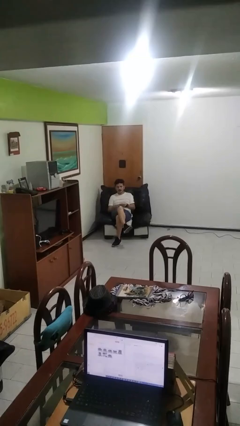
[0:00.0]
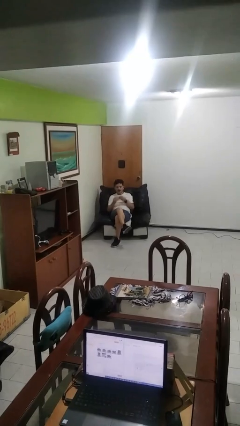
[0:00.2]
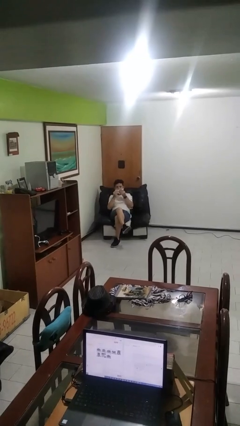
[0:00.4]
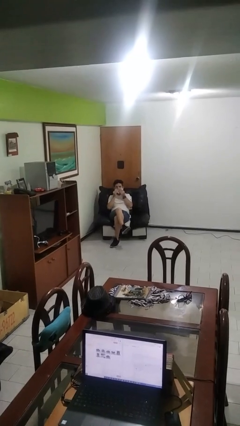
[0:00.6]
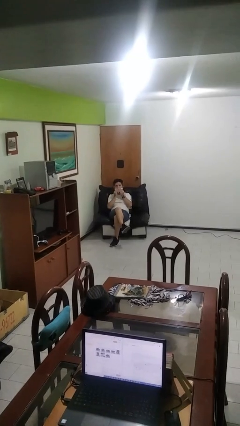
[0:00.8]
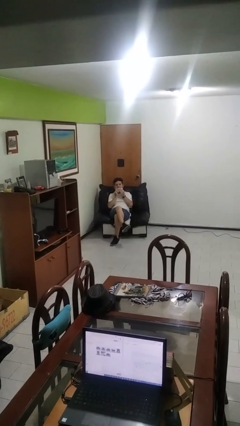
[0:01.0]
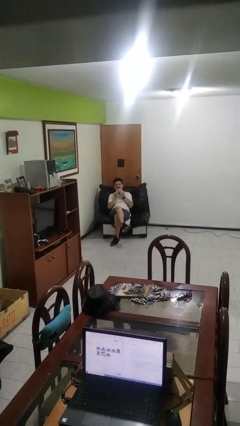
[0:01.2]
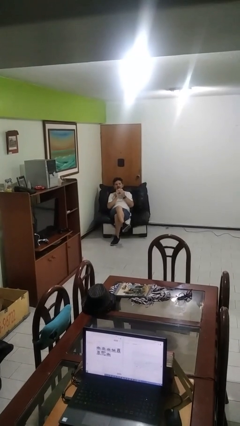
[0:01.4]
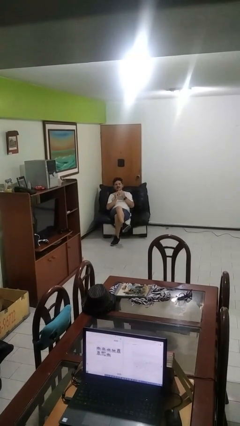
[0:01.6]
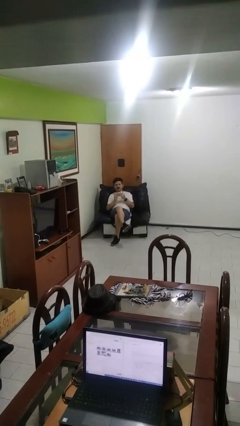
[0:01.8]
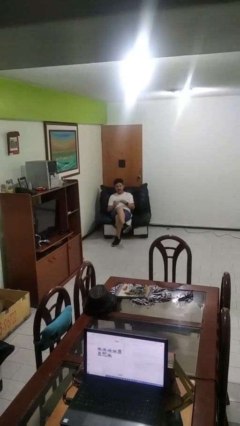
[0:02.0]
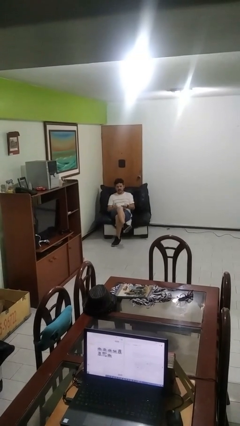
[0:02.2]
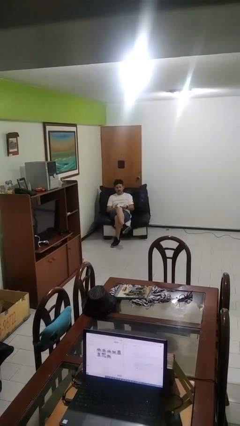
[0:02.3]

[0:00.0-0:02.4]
person wipes mouth with napkin

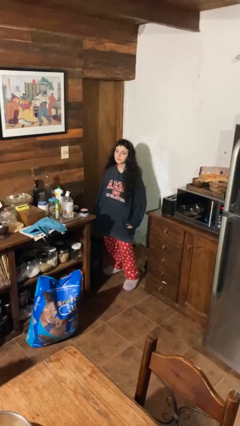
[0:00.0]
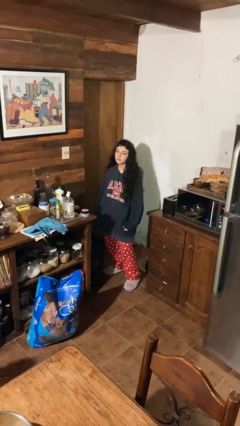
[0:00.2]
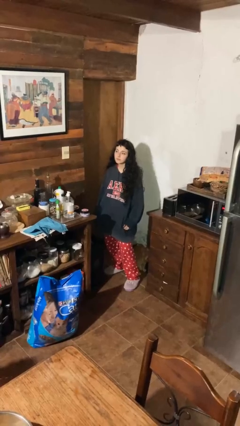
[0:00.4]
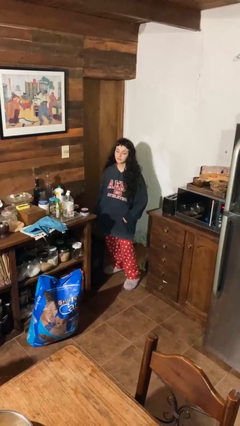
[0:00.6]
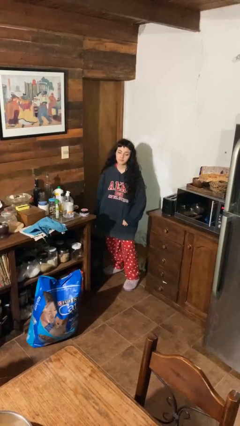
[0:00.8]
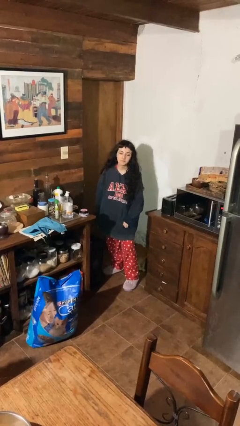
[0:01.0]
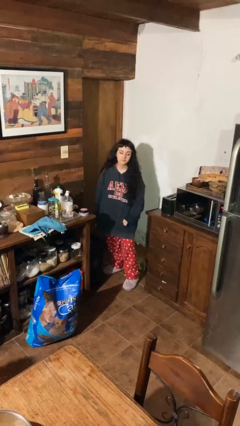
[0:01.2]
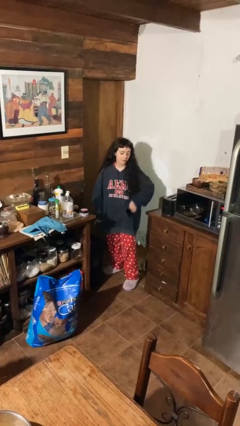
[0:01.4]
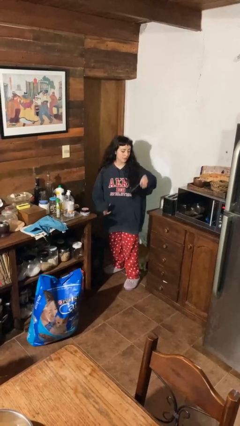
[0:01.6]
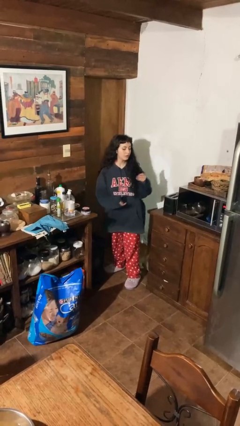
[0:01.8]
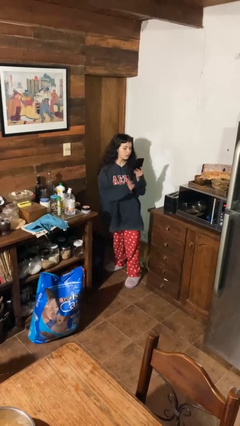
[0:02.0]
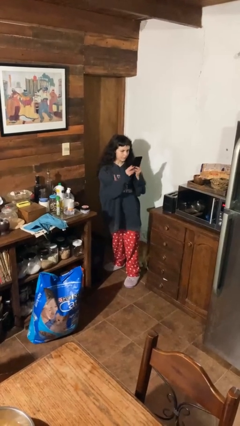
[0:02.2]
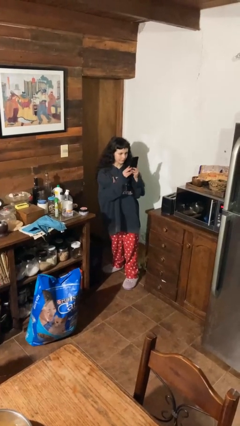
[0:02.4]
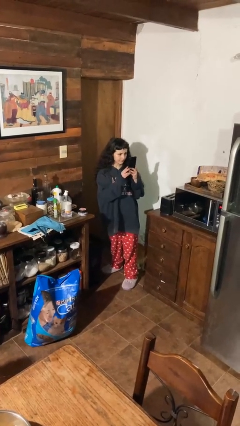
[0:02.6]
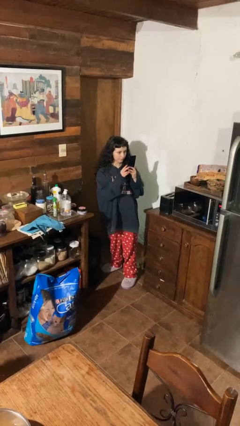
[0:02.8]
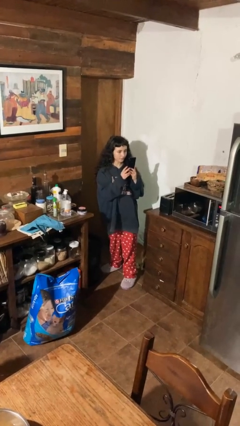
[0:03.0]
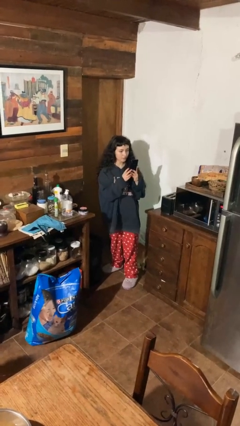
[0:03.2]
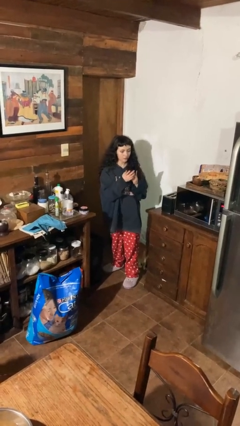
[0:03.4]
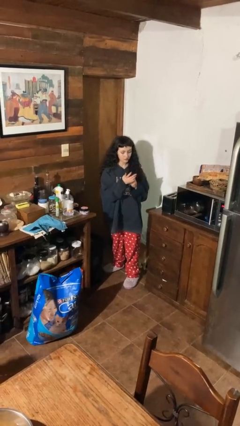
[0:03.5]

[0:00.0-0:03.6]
person takes phone from pocket

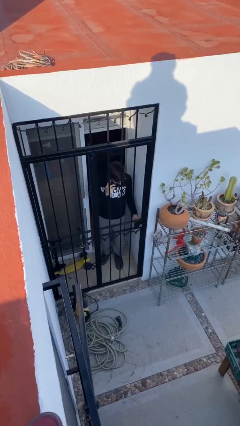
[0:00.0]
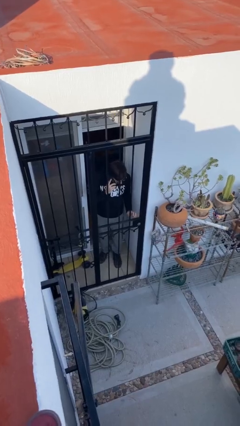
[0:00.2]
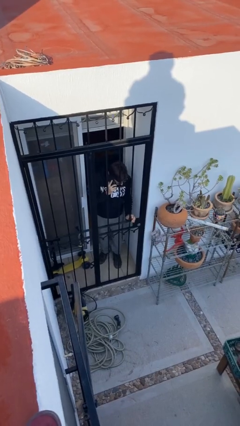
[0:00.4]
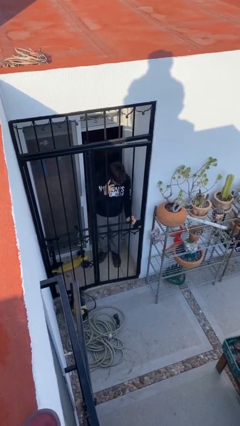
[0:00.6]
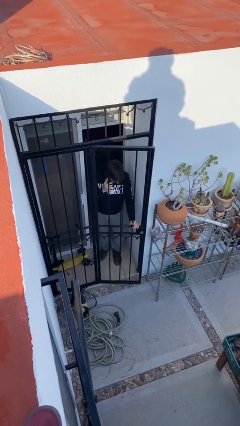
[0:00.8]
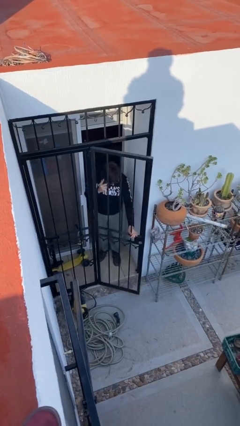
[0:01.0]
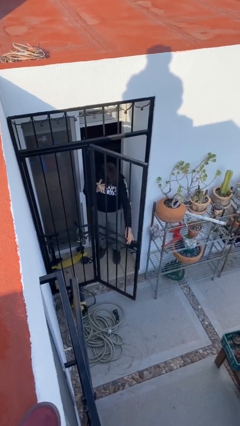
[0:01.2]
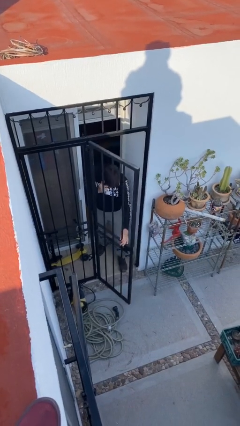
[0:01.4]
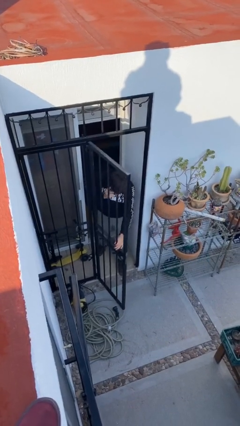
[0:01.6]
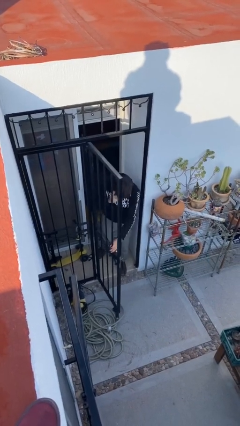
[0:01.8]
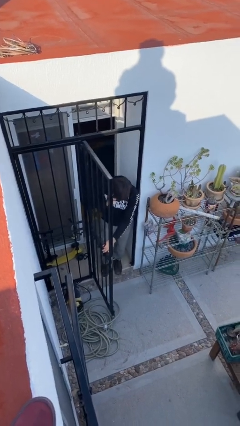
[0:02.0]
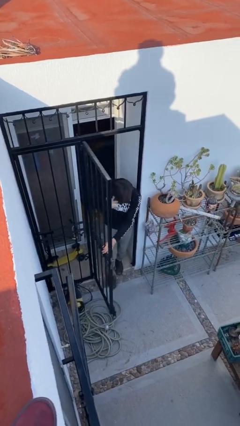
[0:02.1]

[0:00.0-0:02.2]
person opens facility door

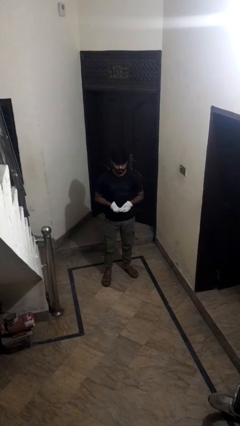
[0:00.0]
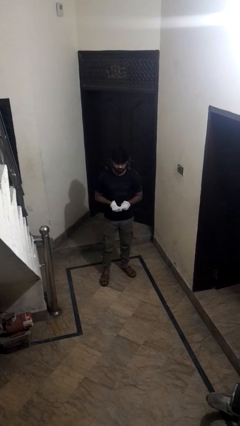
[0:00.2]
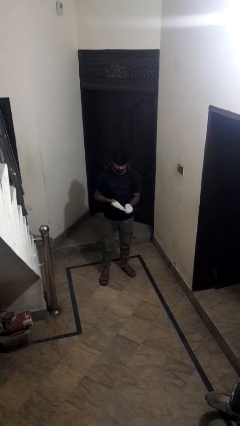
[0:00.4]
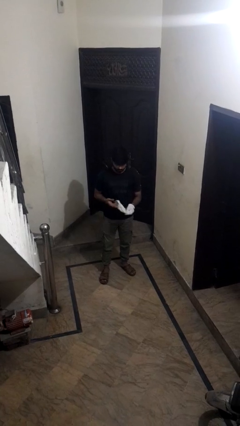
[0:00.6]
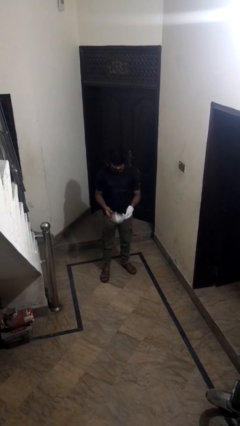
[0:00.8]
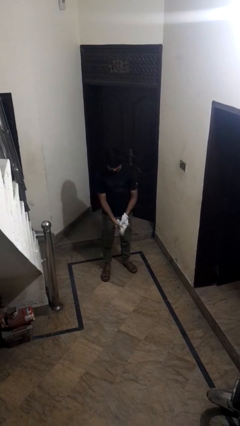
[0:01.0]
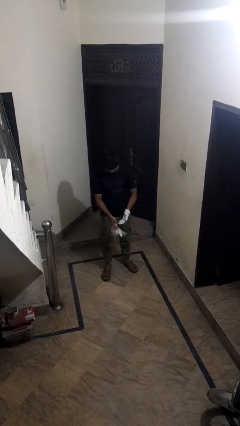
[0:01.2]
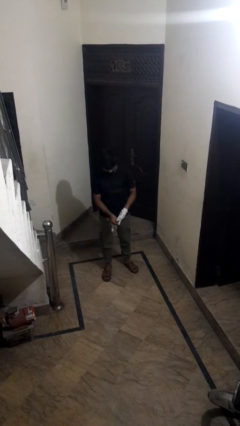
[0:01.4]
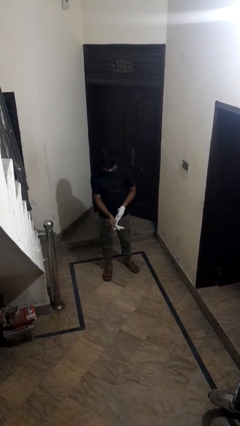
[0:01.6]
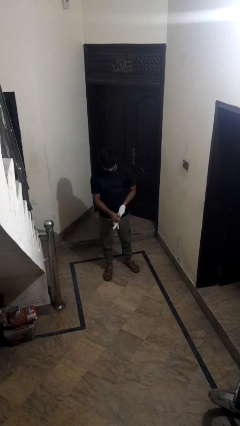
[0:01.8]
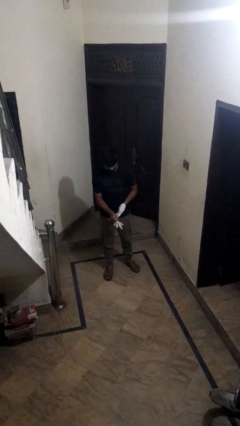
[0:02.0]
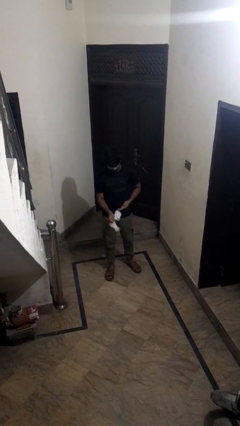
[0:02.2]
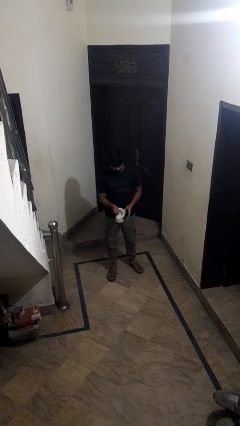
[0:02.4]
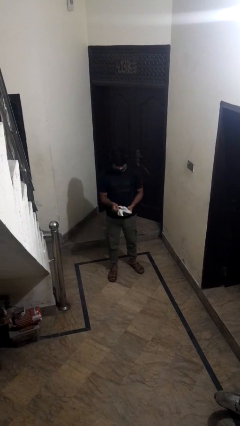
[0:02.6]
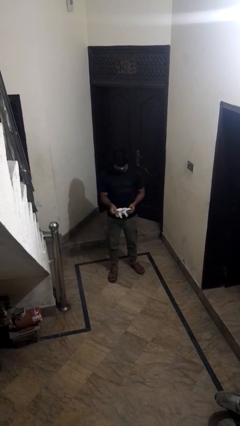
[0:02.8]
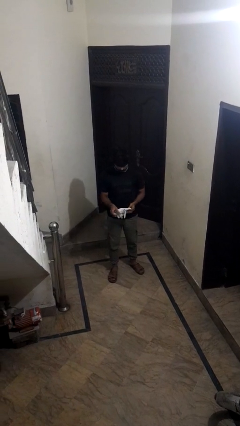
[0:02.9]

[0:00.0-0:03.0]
person takes off gloves

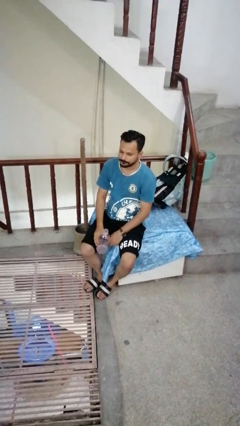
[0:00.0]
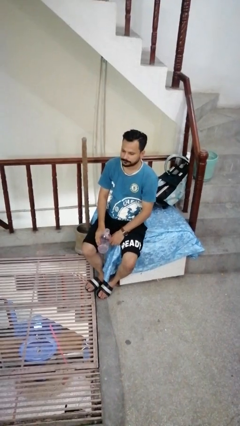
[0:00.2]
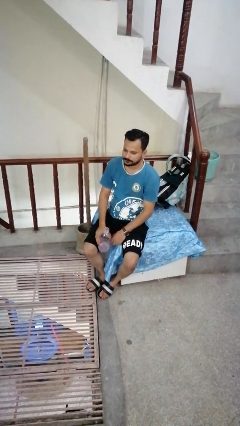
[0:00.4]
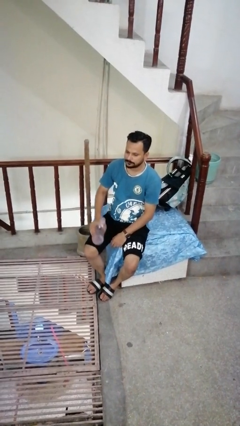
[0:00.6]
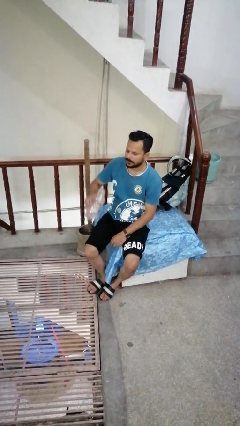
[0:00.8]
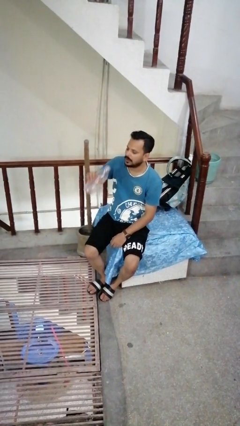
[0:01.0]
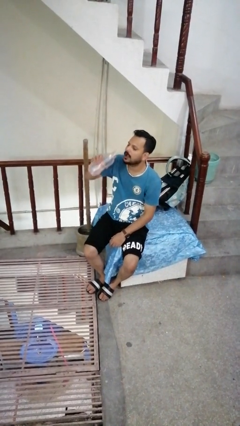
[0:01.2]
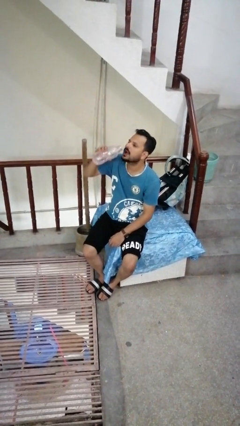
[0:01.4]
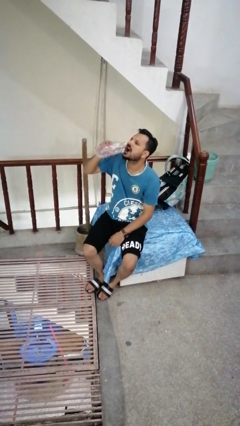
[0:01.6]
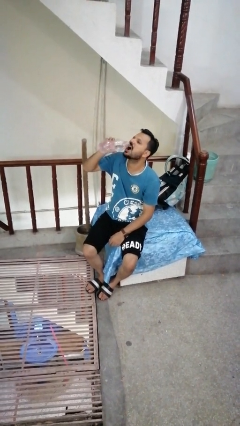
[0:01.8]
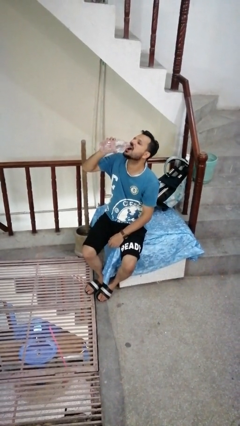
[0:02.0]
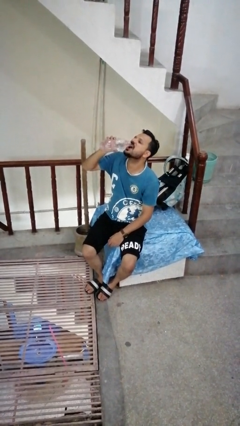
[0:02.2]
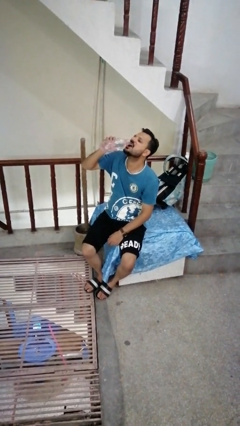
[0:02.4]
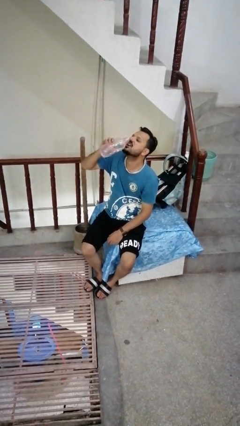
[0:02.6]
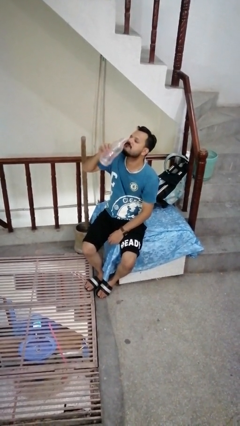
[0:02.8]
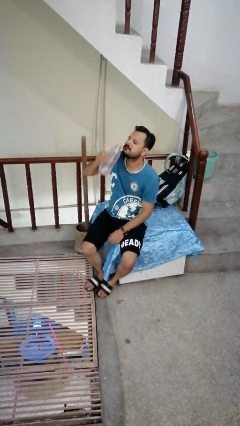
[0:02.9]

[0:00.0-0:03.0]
person drinks from bottle

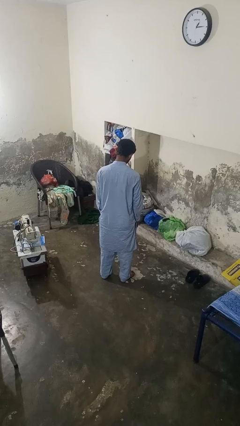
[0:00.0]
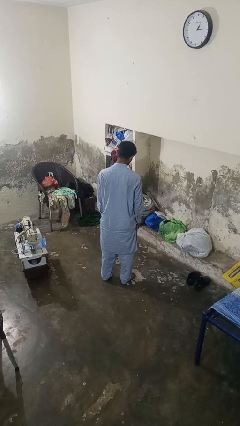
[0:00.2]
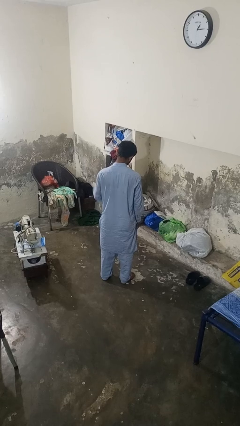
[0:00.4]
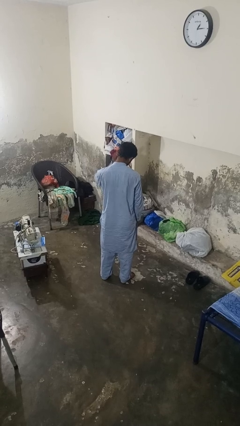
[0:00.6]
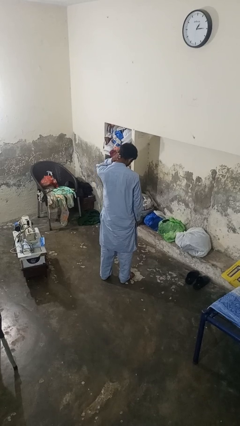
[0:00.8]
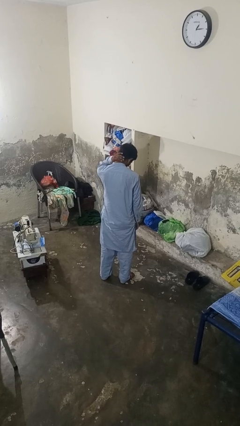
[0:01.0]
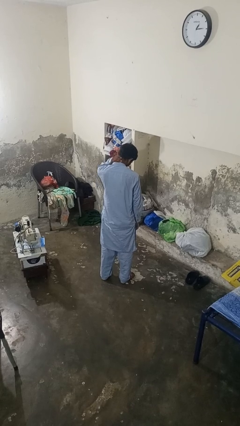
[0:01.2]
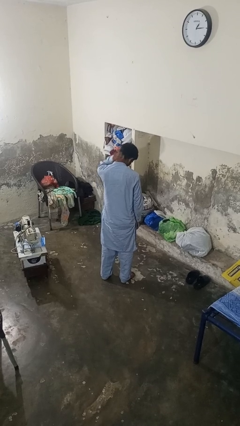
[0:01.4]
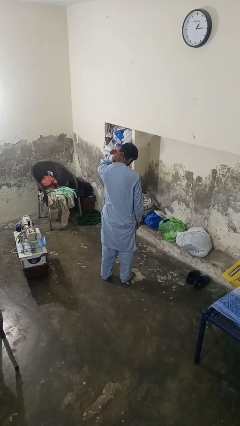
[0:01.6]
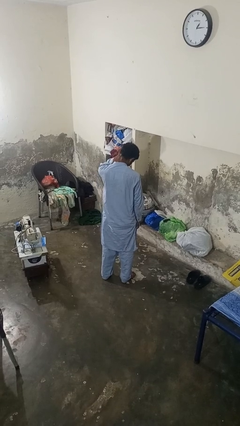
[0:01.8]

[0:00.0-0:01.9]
person rubs neck

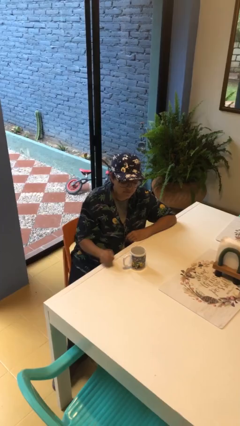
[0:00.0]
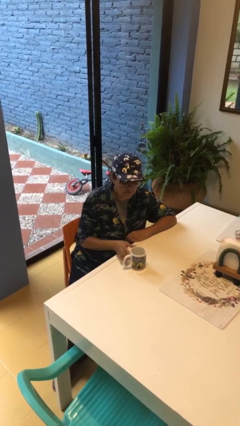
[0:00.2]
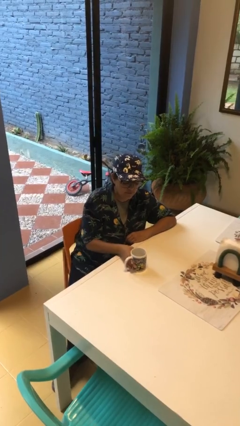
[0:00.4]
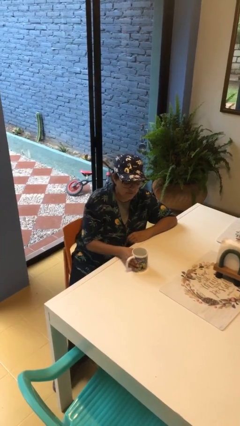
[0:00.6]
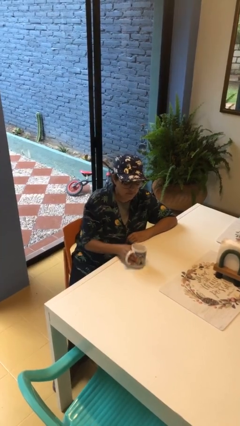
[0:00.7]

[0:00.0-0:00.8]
person picks up object from table
